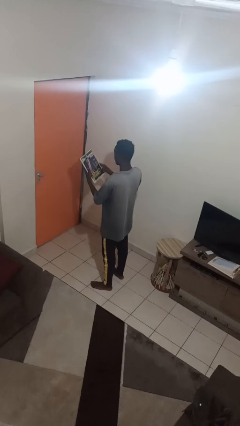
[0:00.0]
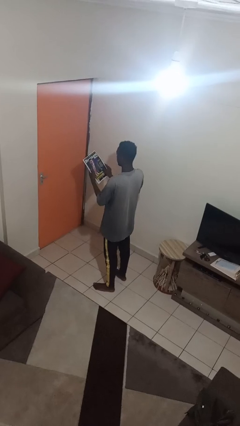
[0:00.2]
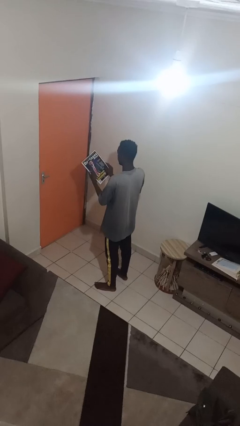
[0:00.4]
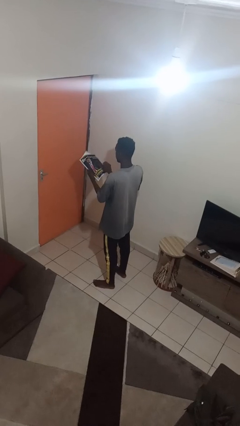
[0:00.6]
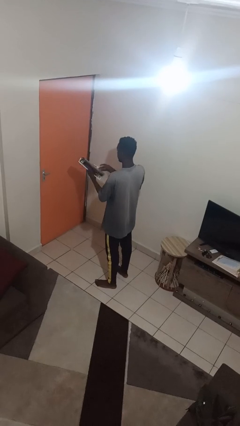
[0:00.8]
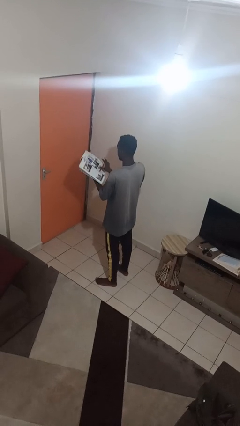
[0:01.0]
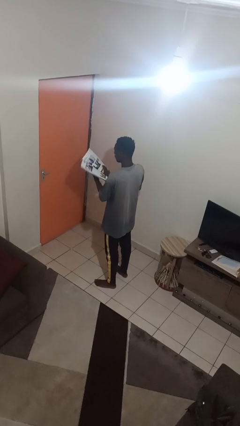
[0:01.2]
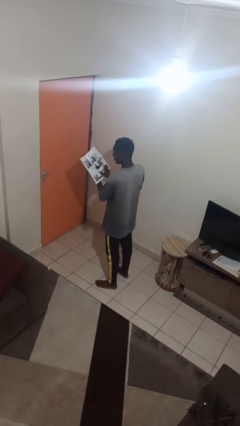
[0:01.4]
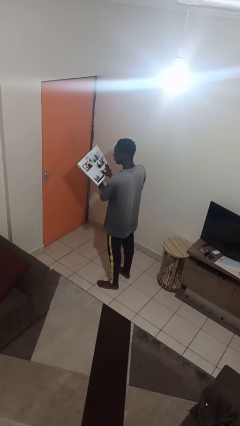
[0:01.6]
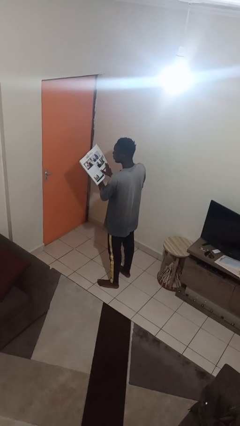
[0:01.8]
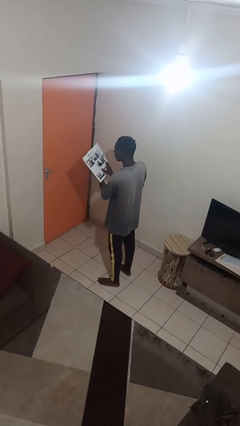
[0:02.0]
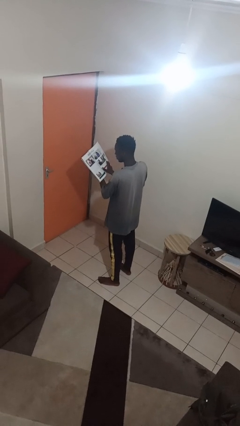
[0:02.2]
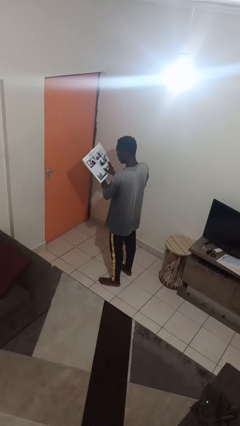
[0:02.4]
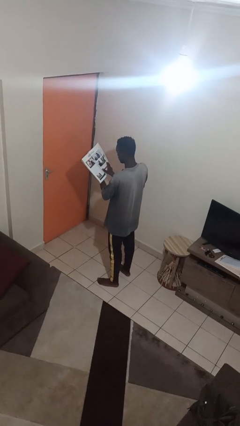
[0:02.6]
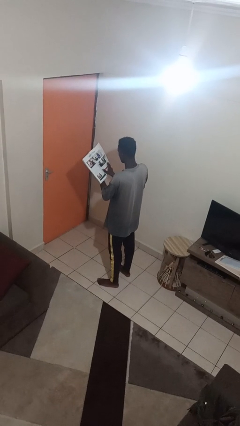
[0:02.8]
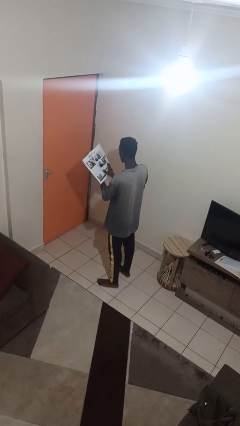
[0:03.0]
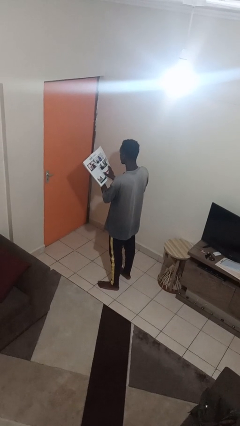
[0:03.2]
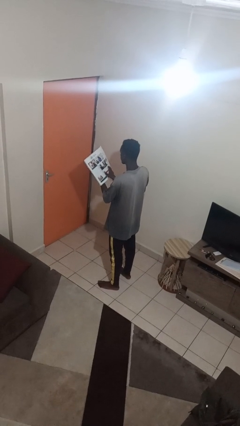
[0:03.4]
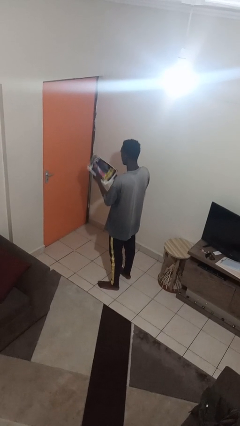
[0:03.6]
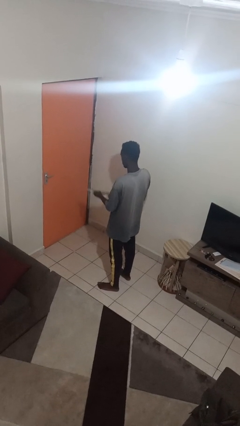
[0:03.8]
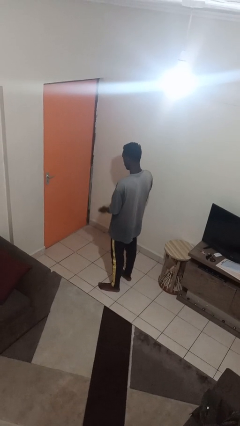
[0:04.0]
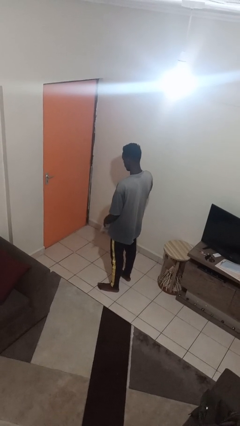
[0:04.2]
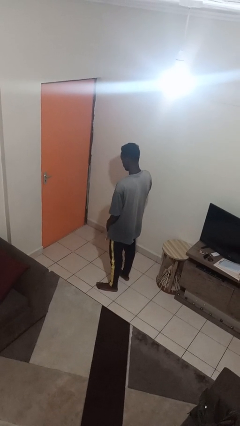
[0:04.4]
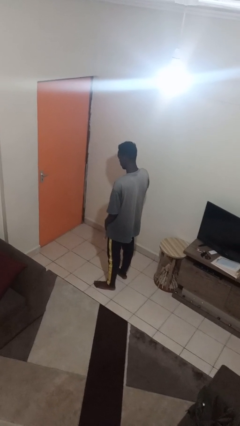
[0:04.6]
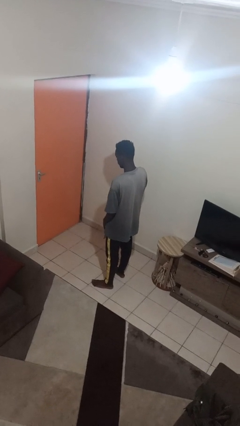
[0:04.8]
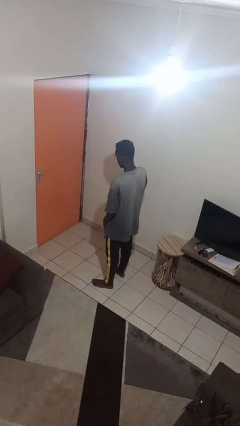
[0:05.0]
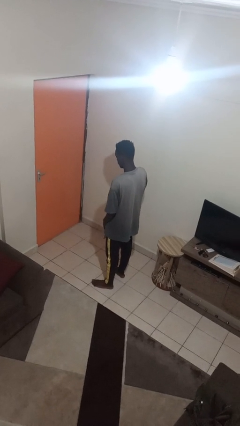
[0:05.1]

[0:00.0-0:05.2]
person reads magazine

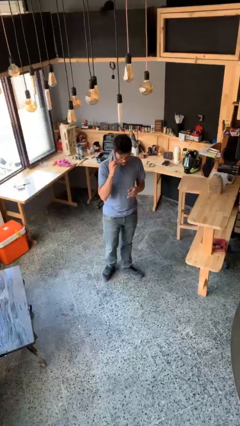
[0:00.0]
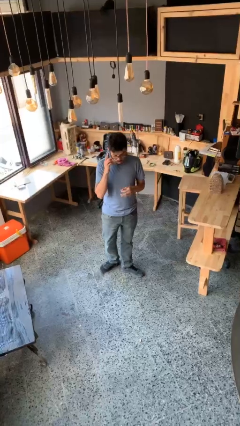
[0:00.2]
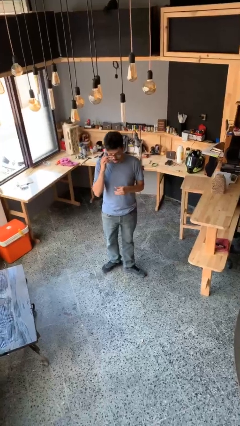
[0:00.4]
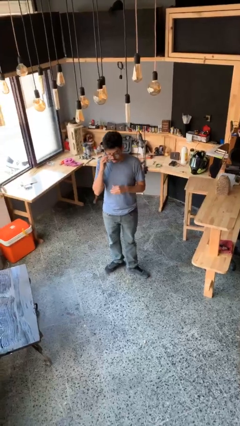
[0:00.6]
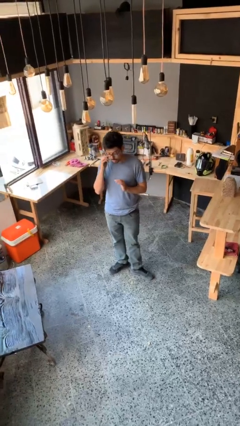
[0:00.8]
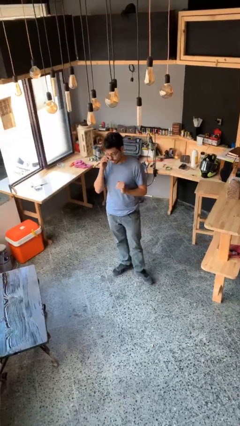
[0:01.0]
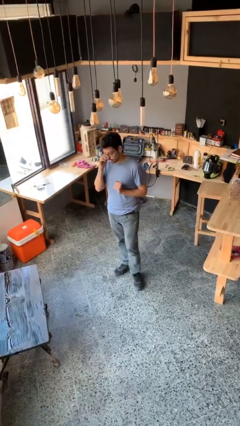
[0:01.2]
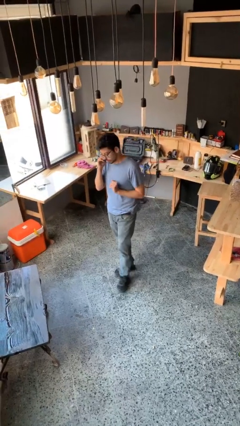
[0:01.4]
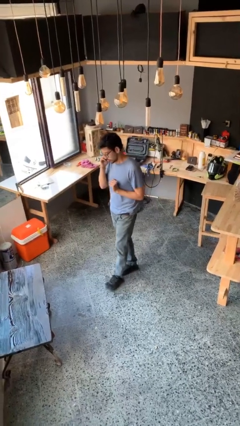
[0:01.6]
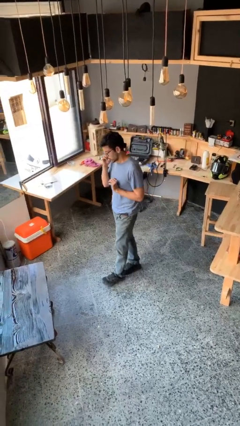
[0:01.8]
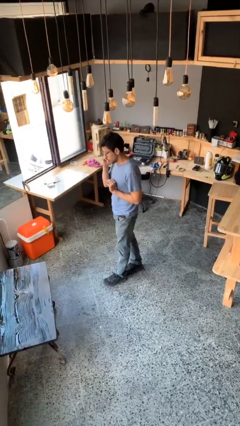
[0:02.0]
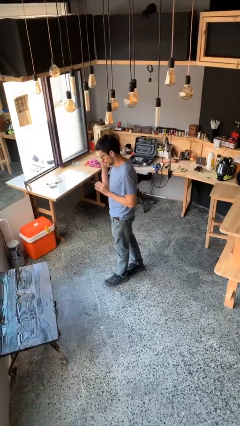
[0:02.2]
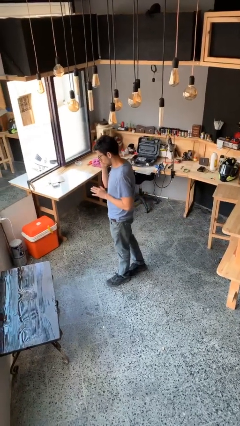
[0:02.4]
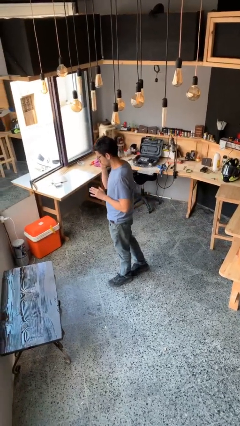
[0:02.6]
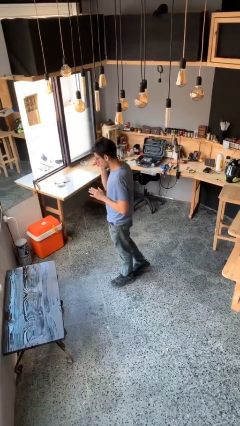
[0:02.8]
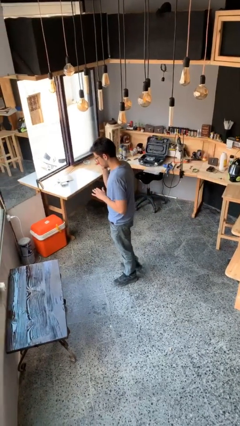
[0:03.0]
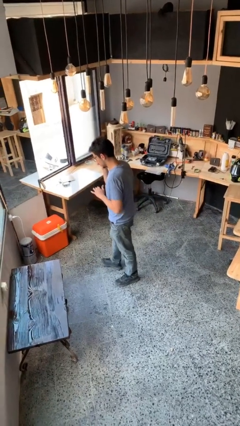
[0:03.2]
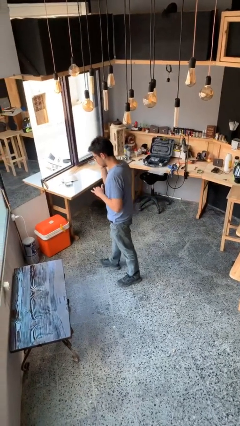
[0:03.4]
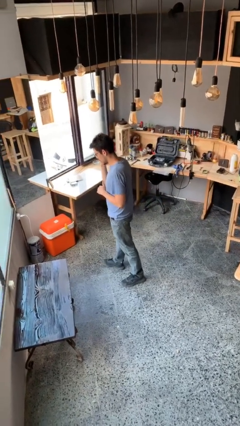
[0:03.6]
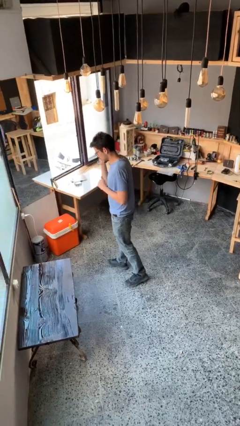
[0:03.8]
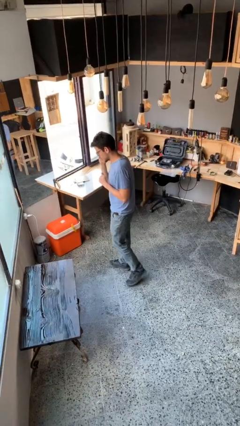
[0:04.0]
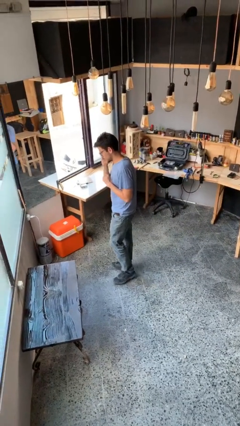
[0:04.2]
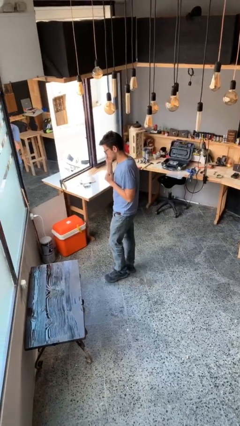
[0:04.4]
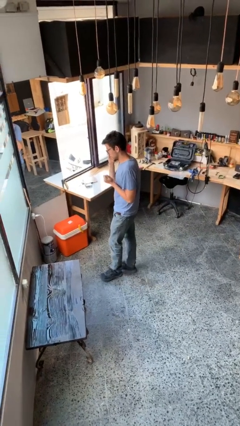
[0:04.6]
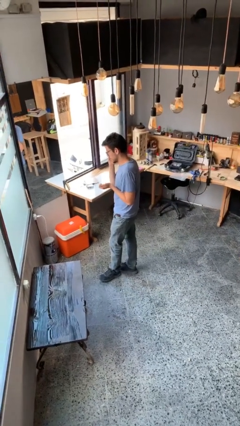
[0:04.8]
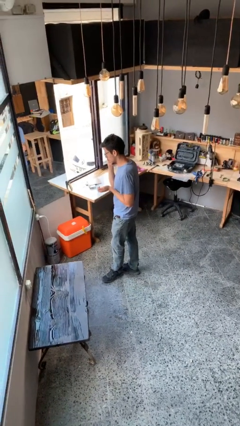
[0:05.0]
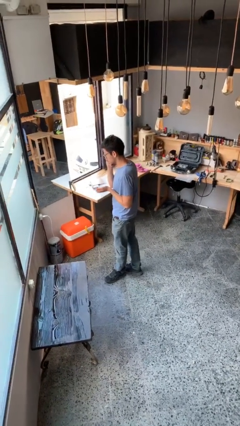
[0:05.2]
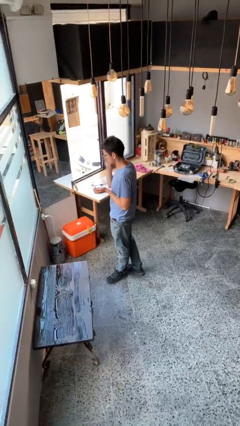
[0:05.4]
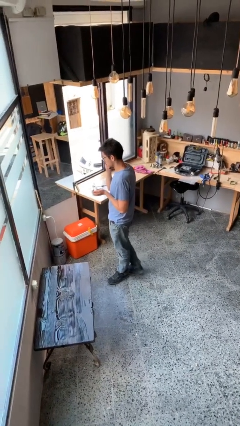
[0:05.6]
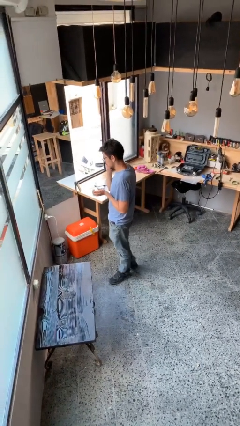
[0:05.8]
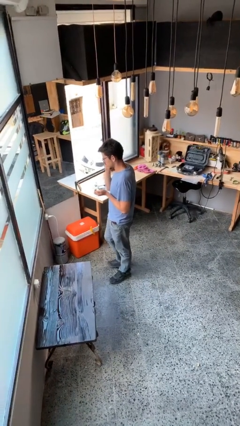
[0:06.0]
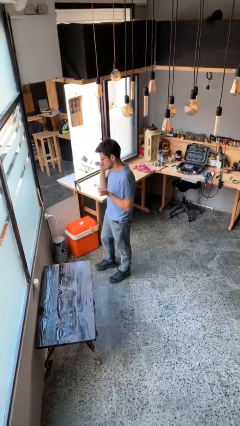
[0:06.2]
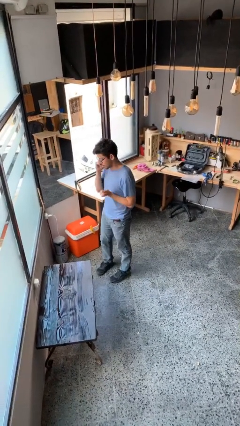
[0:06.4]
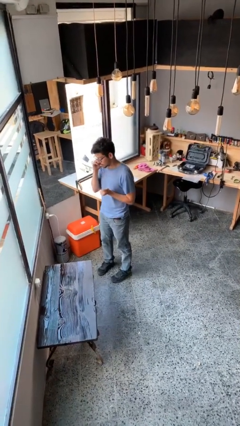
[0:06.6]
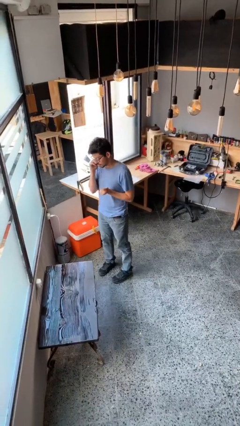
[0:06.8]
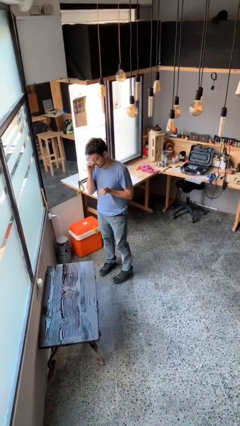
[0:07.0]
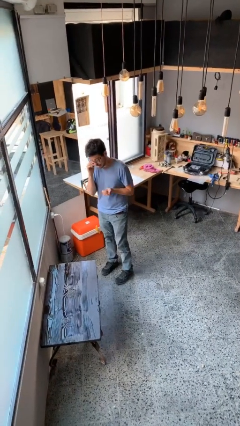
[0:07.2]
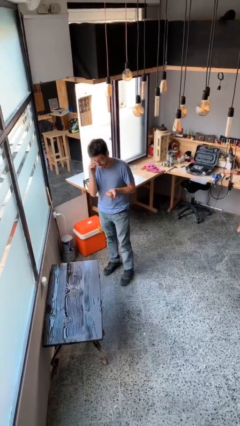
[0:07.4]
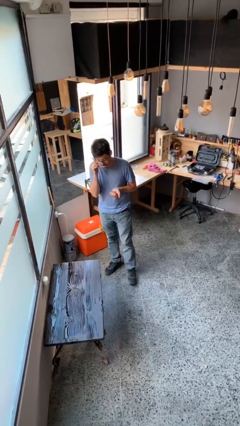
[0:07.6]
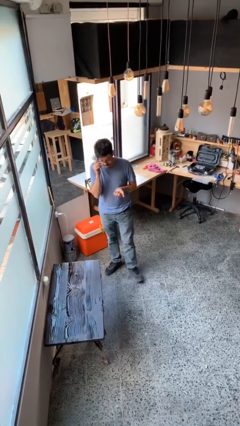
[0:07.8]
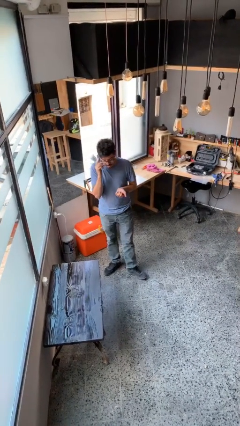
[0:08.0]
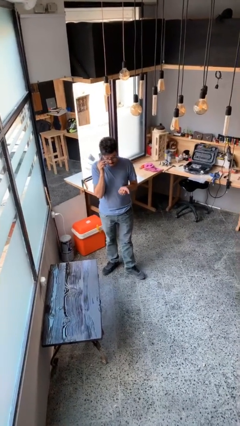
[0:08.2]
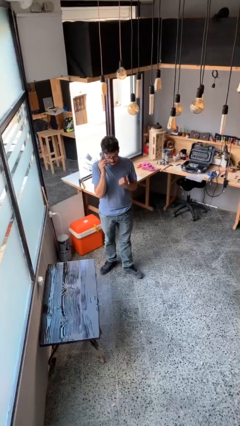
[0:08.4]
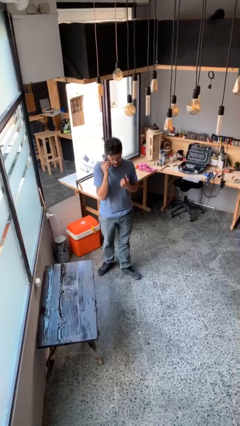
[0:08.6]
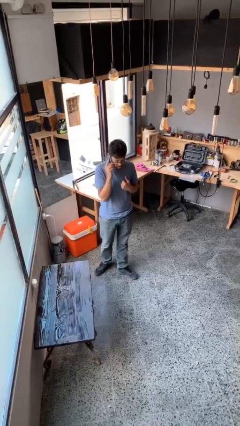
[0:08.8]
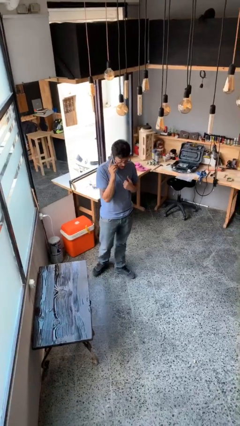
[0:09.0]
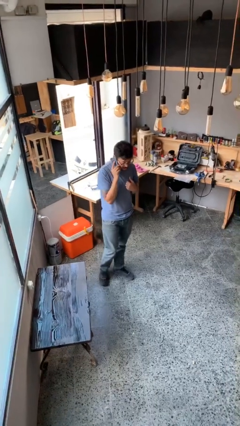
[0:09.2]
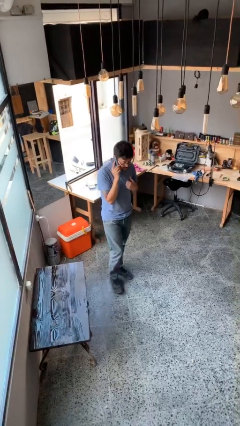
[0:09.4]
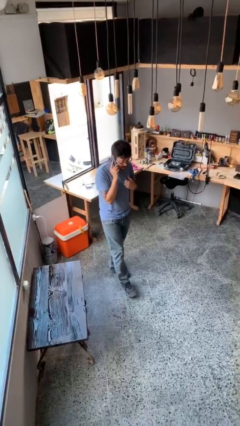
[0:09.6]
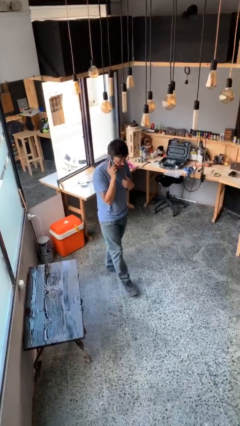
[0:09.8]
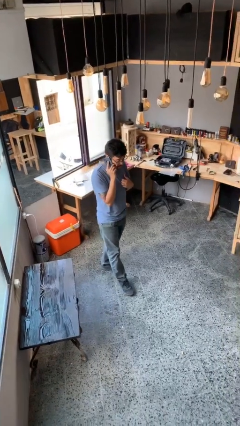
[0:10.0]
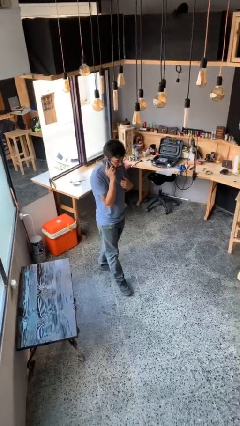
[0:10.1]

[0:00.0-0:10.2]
person talks on phone

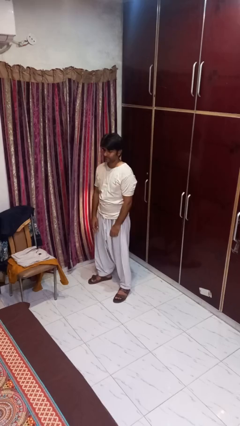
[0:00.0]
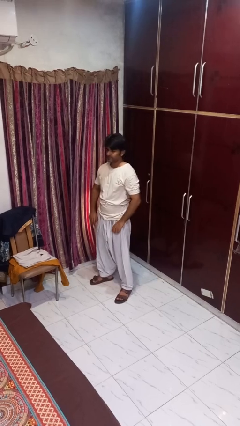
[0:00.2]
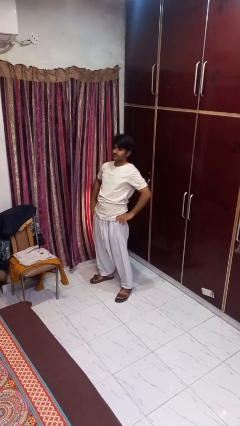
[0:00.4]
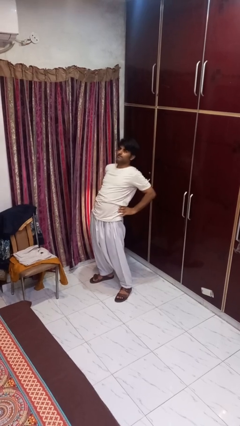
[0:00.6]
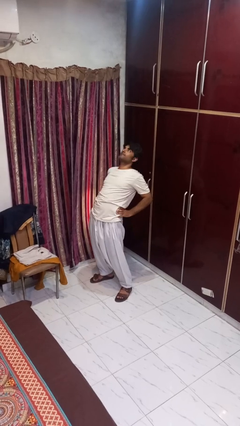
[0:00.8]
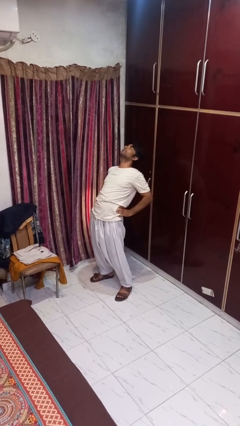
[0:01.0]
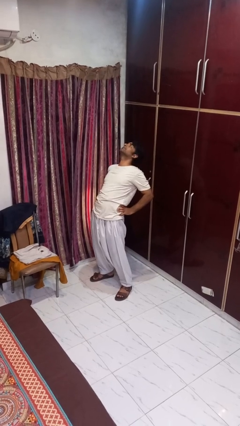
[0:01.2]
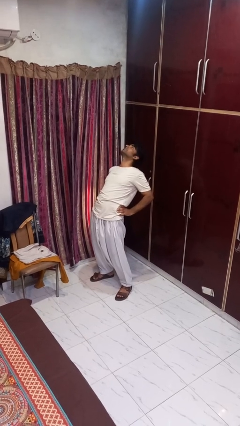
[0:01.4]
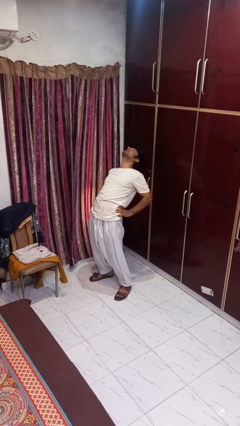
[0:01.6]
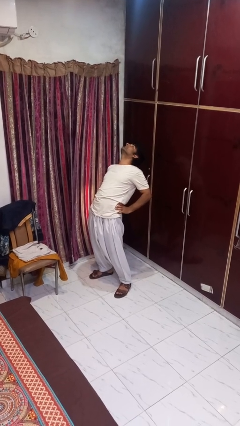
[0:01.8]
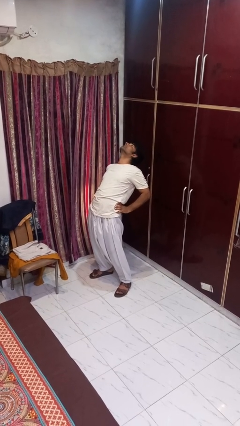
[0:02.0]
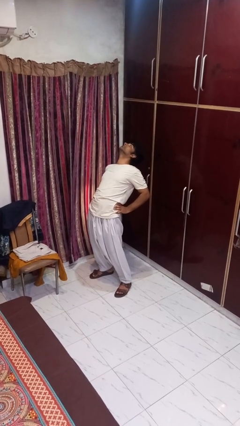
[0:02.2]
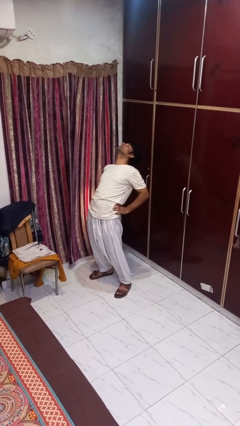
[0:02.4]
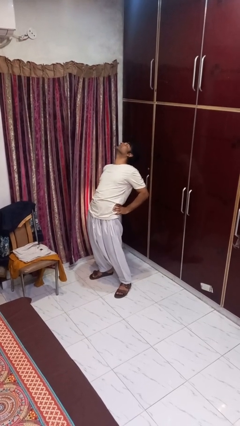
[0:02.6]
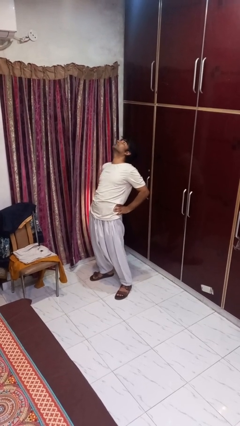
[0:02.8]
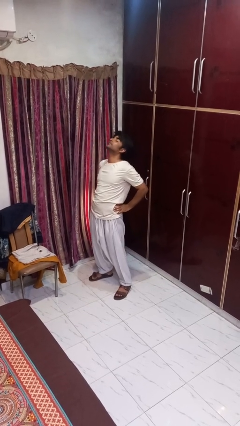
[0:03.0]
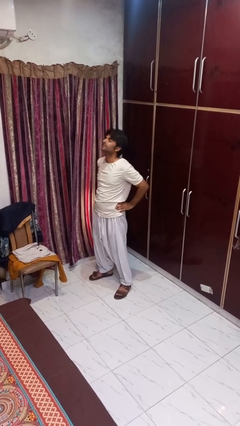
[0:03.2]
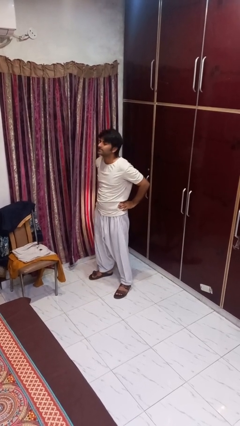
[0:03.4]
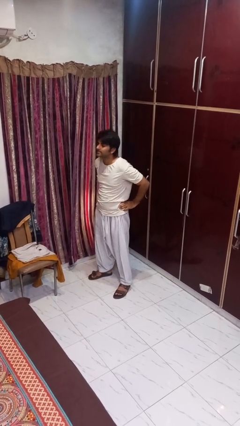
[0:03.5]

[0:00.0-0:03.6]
person stretches back
